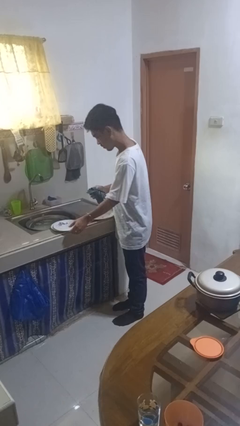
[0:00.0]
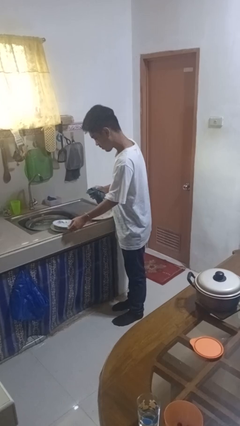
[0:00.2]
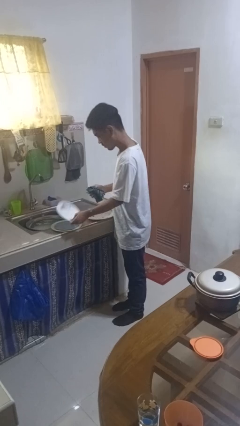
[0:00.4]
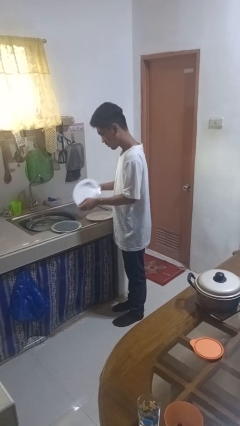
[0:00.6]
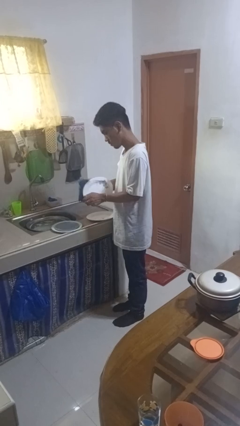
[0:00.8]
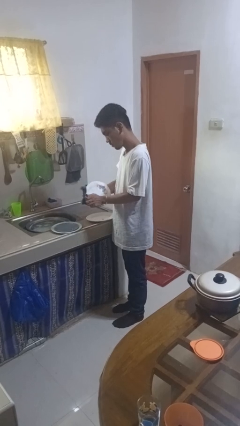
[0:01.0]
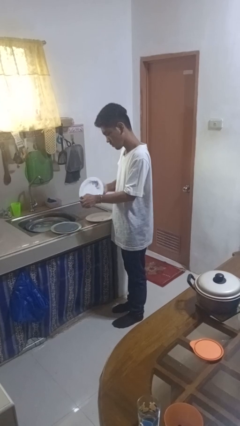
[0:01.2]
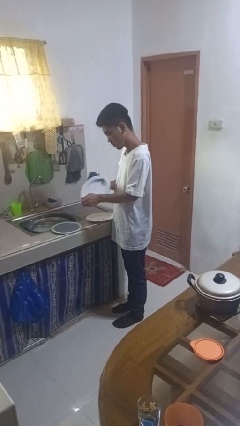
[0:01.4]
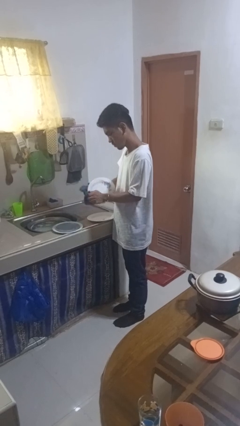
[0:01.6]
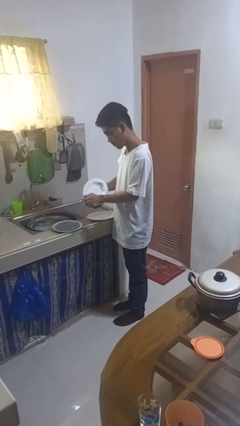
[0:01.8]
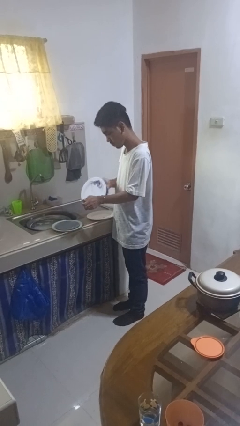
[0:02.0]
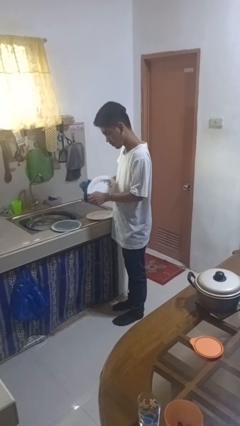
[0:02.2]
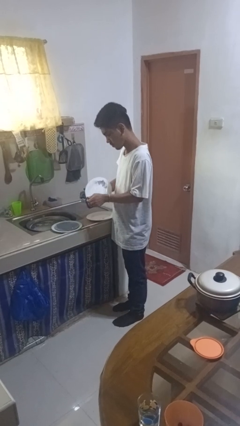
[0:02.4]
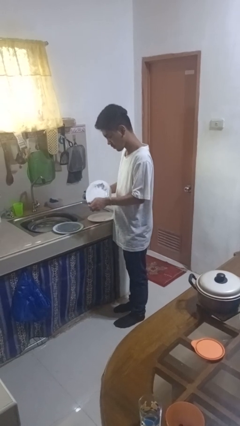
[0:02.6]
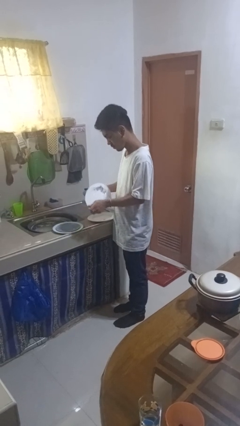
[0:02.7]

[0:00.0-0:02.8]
person dries dish

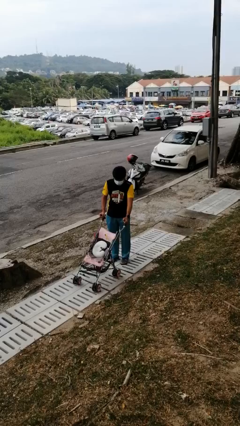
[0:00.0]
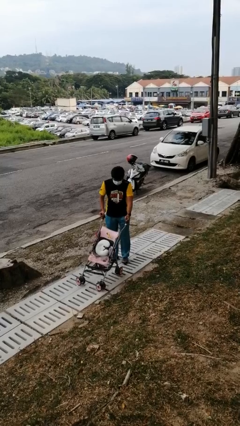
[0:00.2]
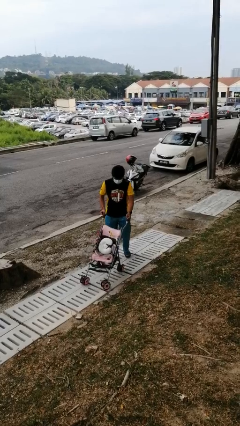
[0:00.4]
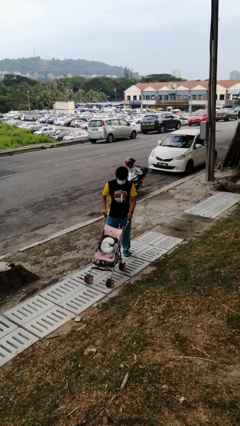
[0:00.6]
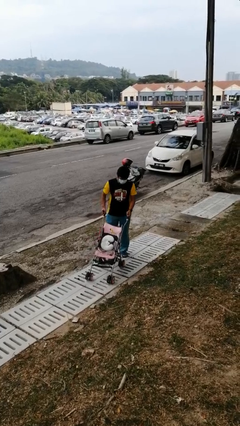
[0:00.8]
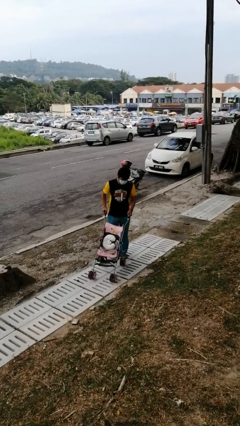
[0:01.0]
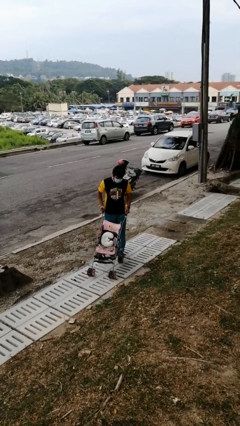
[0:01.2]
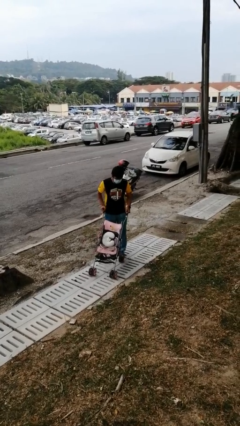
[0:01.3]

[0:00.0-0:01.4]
person pulls wheeled cart

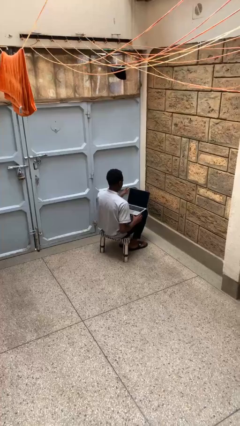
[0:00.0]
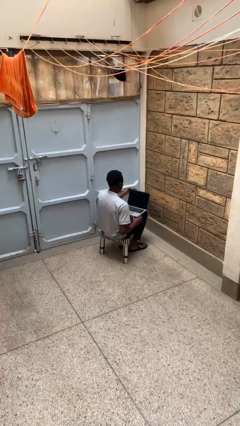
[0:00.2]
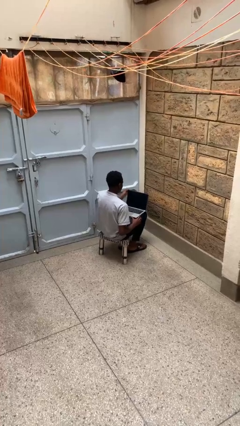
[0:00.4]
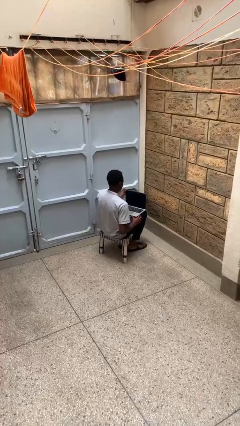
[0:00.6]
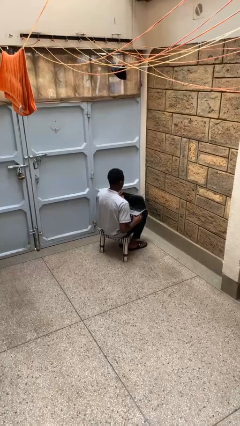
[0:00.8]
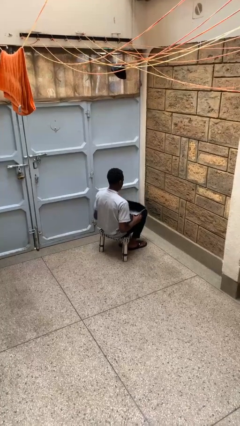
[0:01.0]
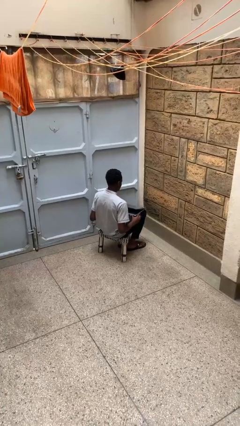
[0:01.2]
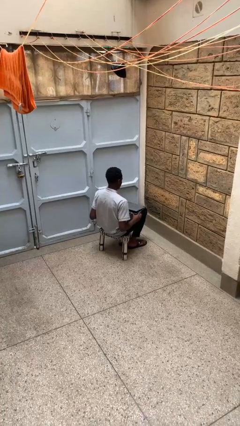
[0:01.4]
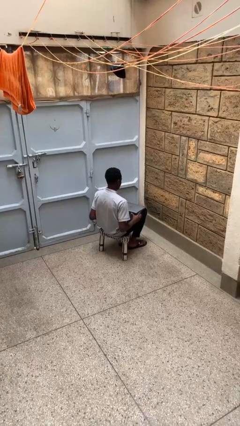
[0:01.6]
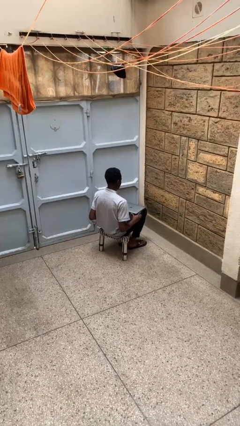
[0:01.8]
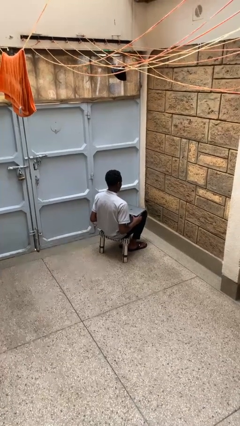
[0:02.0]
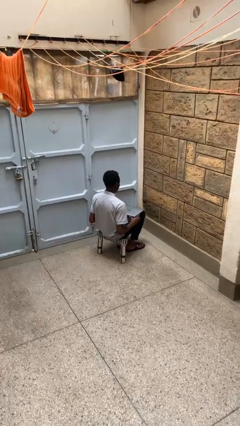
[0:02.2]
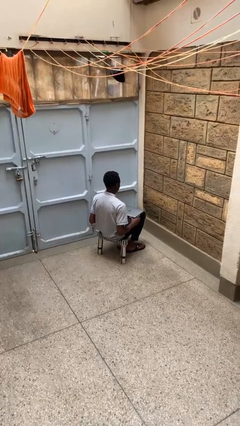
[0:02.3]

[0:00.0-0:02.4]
person closes laptop

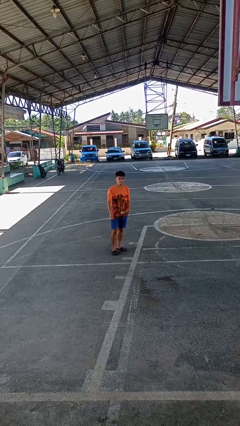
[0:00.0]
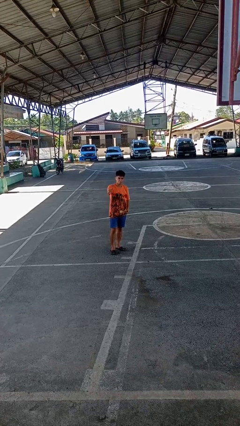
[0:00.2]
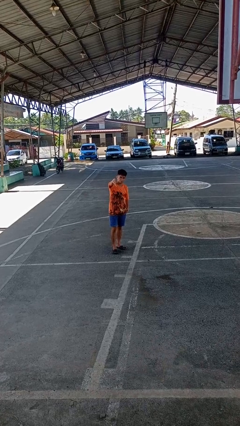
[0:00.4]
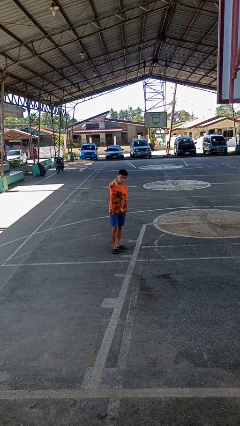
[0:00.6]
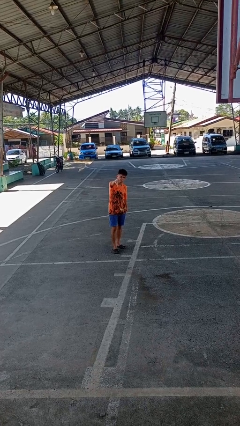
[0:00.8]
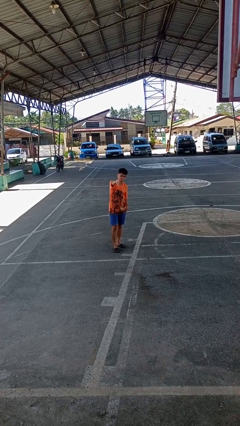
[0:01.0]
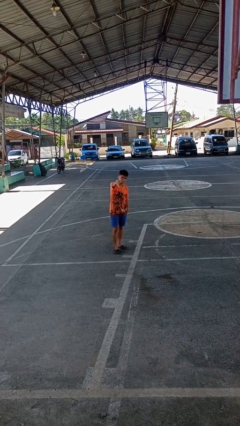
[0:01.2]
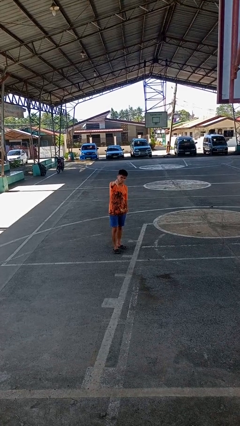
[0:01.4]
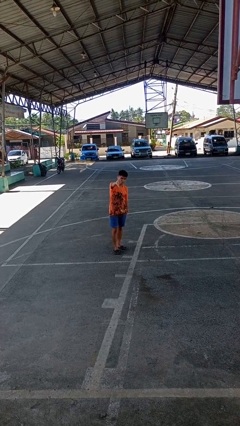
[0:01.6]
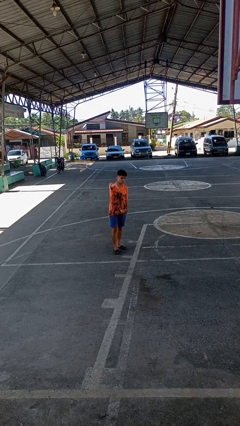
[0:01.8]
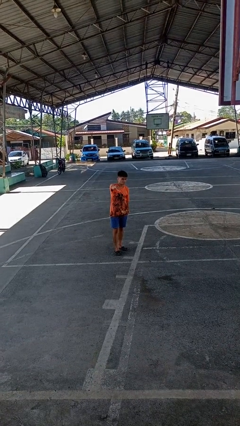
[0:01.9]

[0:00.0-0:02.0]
person gestures thumbs down

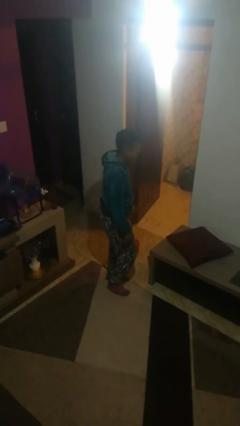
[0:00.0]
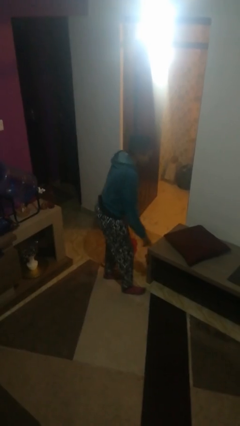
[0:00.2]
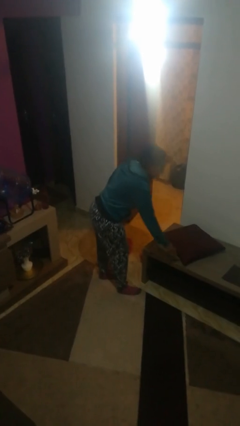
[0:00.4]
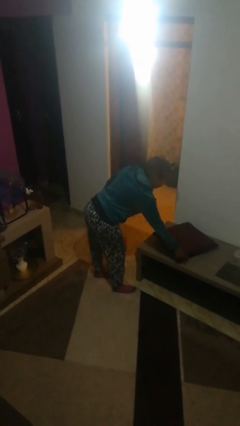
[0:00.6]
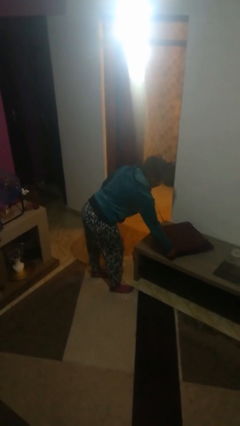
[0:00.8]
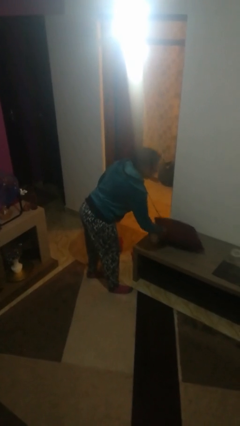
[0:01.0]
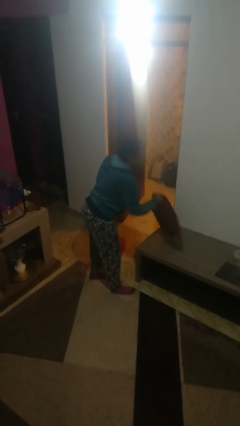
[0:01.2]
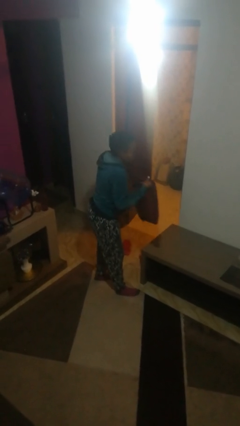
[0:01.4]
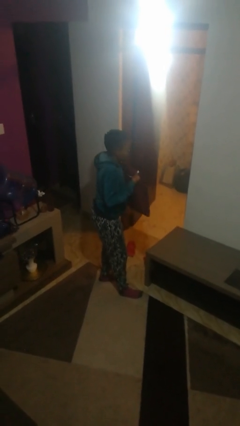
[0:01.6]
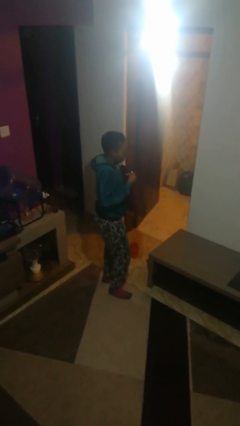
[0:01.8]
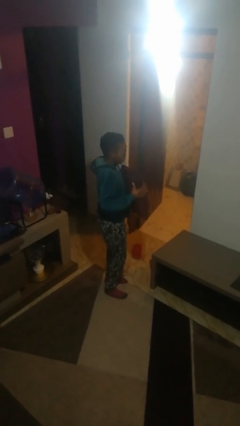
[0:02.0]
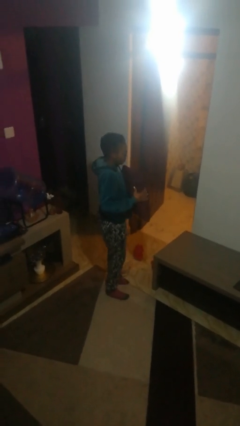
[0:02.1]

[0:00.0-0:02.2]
person picks up object from table

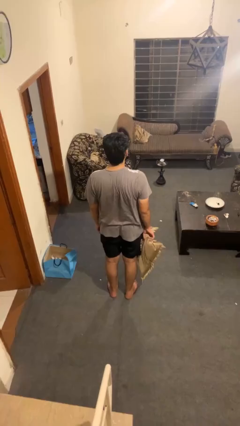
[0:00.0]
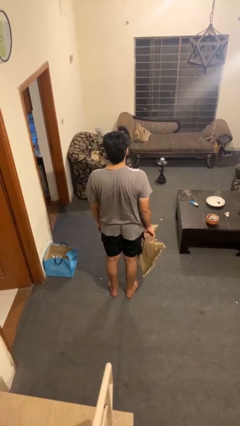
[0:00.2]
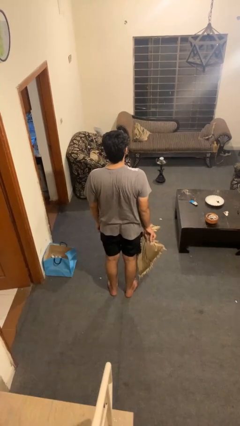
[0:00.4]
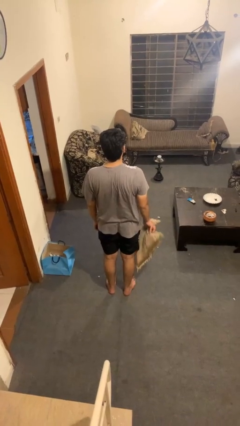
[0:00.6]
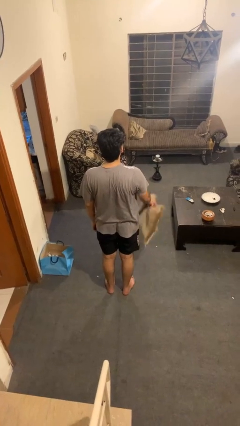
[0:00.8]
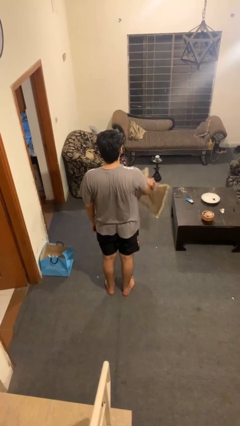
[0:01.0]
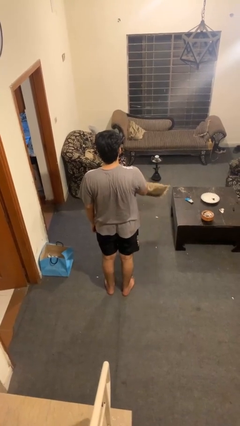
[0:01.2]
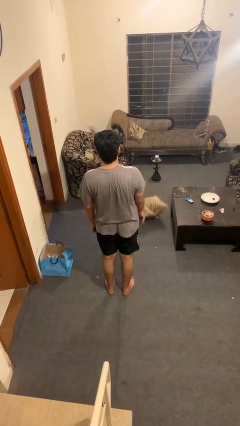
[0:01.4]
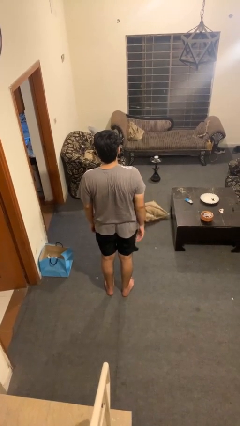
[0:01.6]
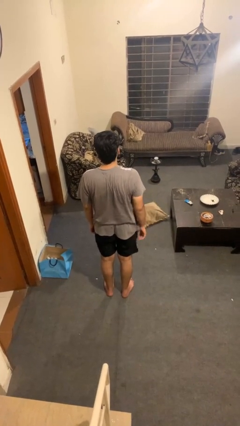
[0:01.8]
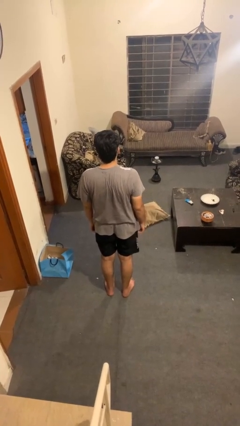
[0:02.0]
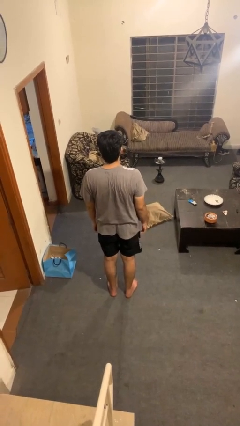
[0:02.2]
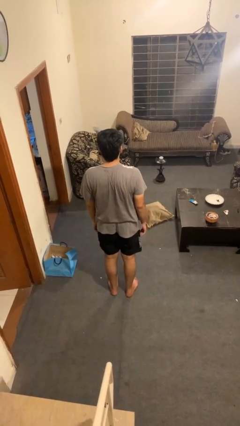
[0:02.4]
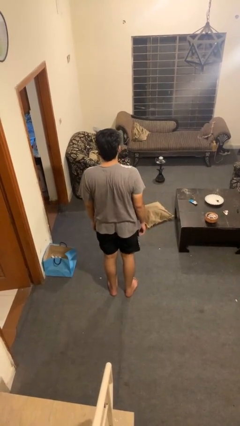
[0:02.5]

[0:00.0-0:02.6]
person throws object into air

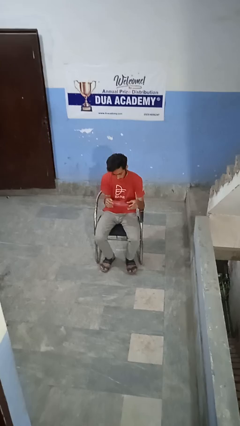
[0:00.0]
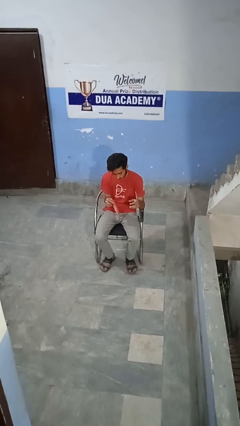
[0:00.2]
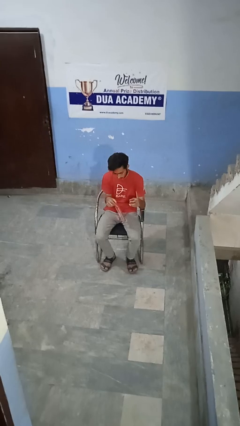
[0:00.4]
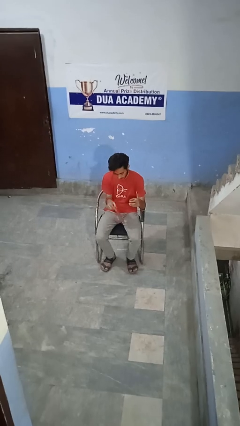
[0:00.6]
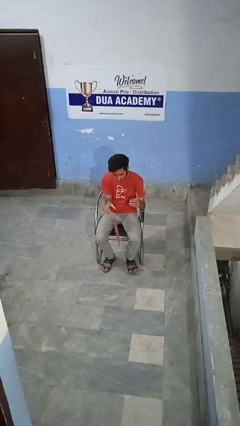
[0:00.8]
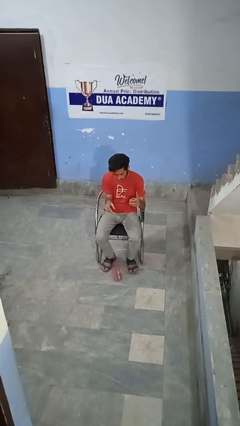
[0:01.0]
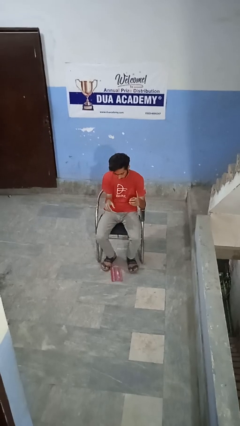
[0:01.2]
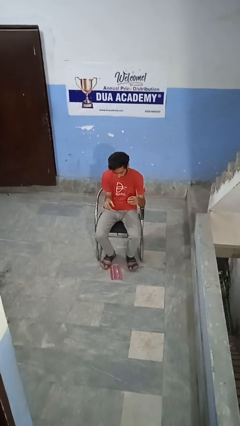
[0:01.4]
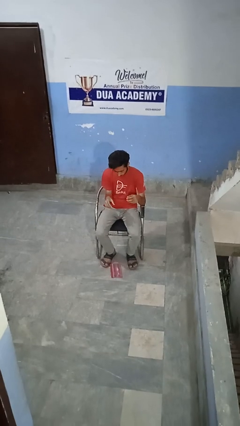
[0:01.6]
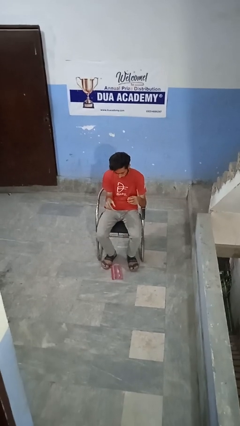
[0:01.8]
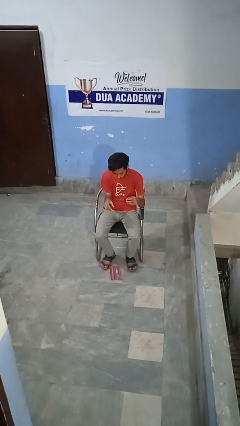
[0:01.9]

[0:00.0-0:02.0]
person drops object

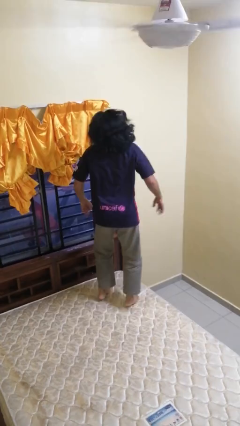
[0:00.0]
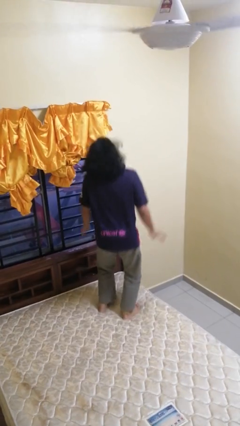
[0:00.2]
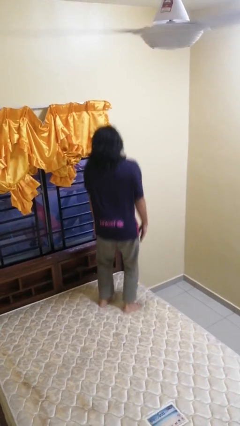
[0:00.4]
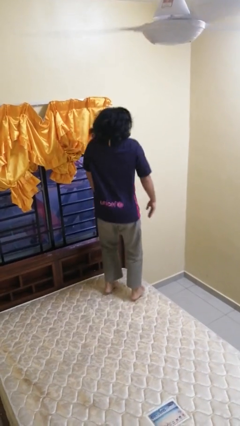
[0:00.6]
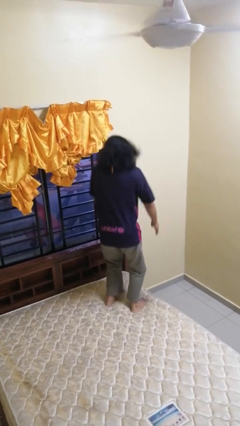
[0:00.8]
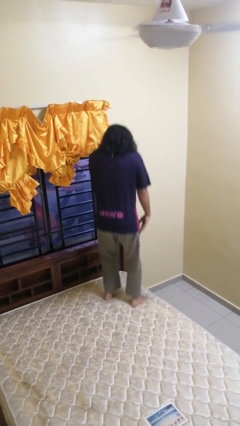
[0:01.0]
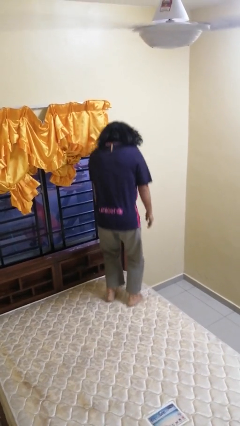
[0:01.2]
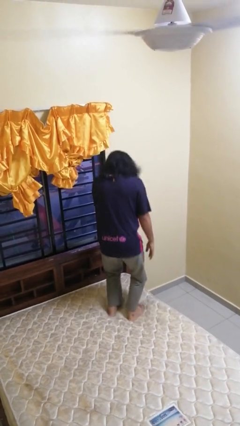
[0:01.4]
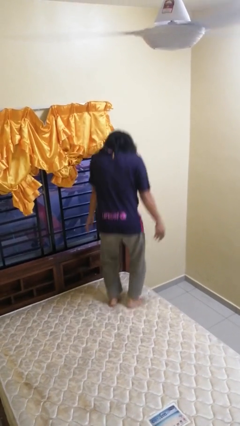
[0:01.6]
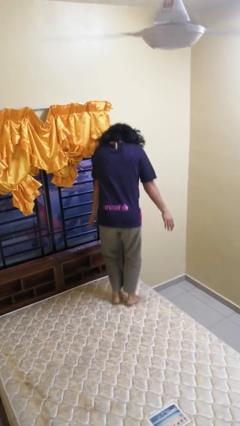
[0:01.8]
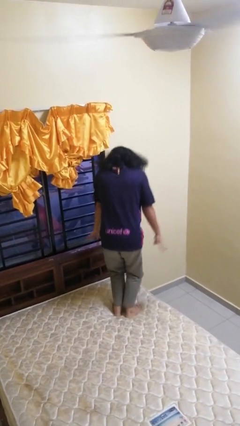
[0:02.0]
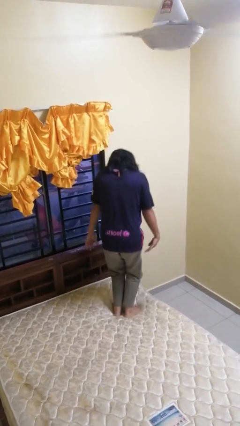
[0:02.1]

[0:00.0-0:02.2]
person jumps on bed
